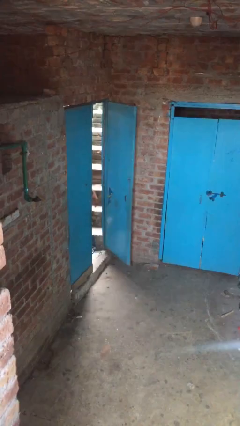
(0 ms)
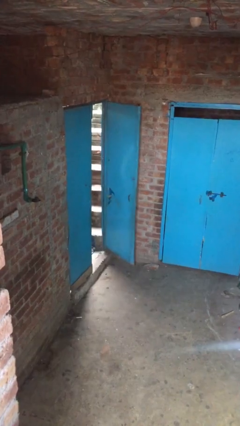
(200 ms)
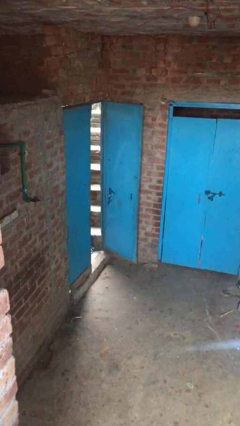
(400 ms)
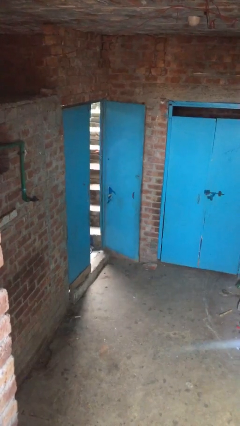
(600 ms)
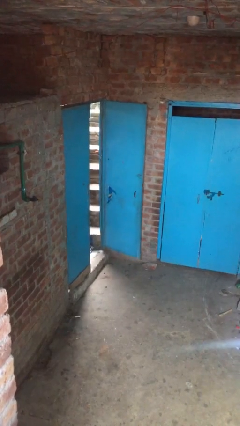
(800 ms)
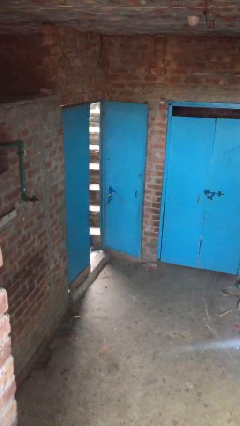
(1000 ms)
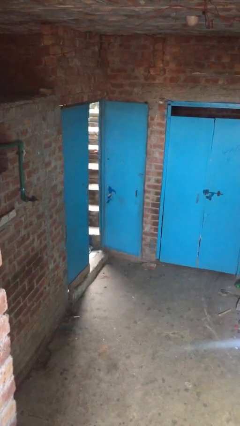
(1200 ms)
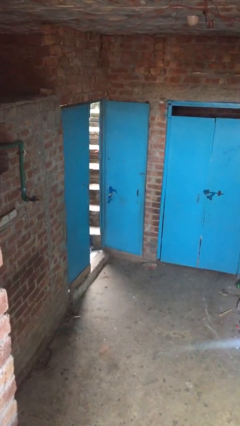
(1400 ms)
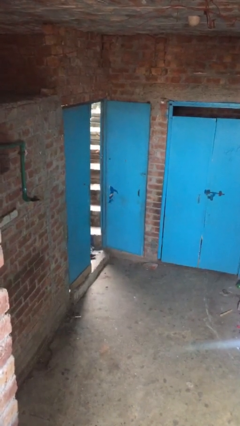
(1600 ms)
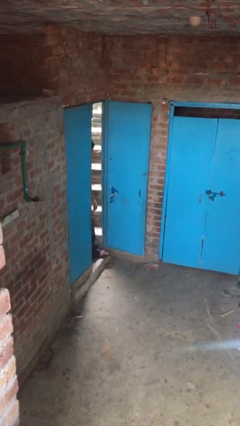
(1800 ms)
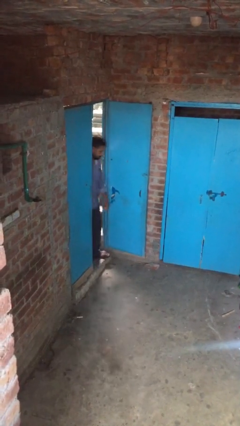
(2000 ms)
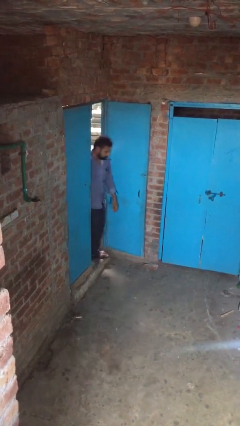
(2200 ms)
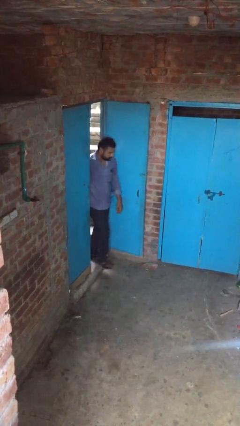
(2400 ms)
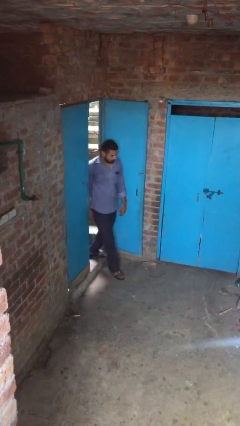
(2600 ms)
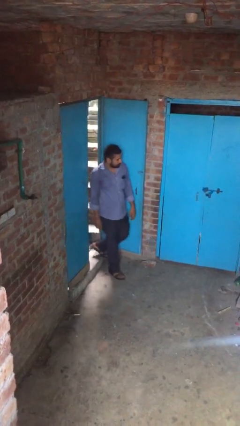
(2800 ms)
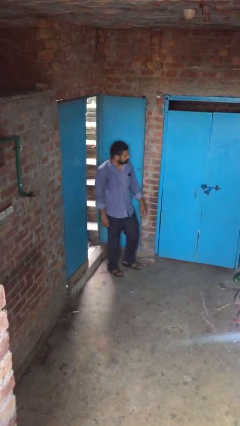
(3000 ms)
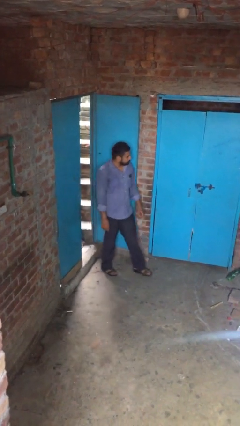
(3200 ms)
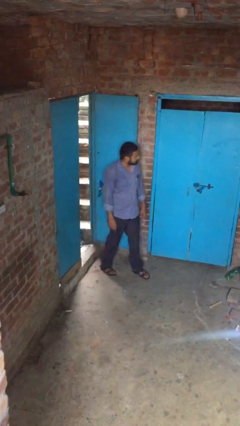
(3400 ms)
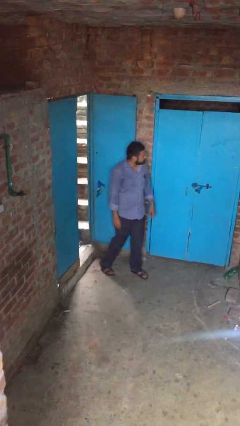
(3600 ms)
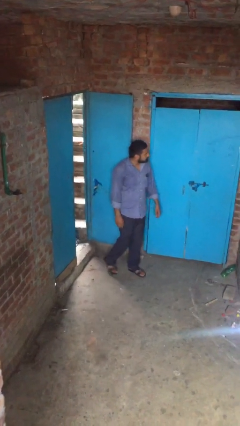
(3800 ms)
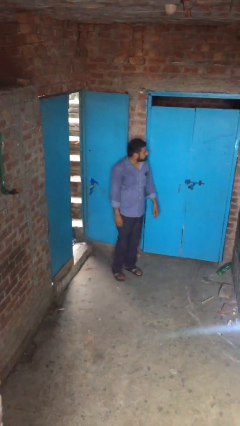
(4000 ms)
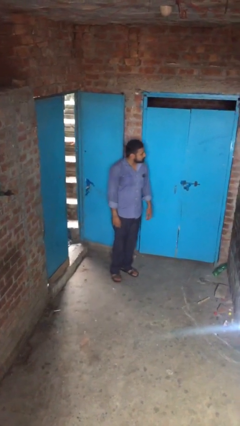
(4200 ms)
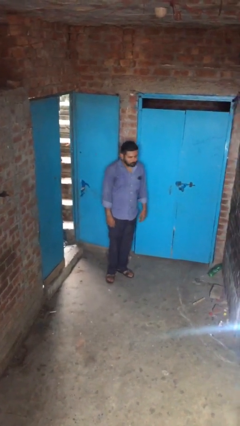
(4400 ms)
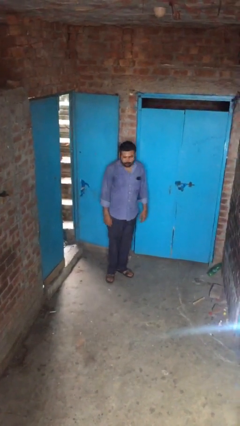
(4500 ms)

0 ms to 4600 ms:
person enters scene through structure

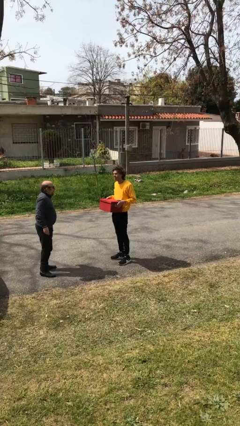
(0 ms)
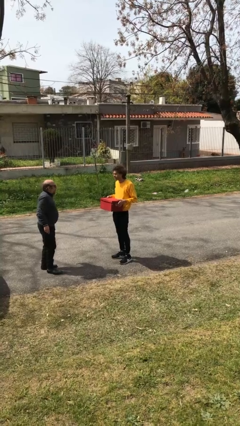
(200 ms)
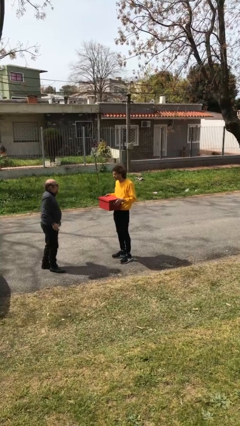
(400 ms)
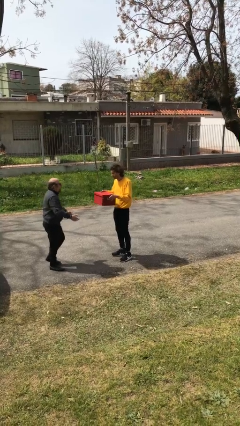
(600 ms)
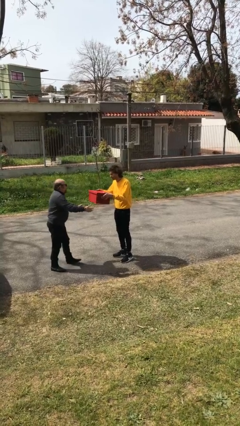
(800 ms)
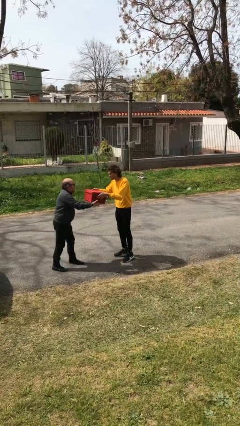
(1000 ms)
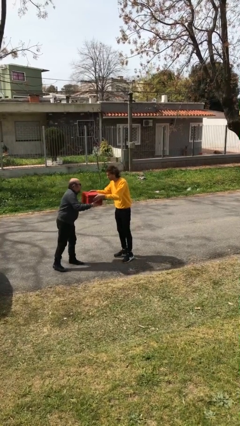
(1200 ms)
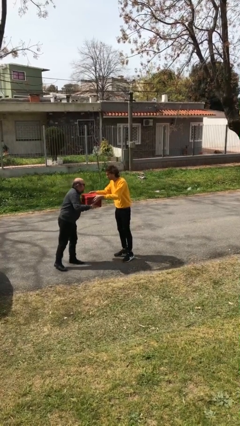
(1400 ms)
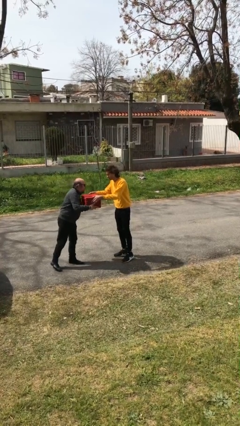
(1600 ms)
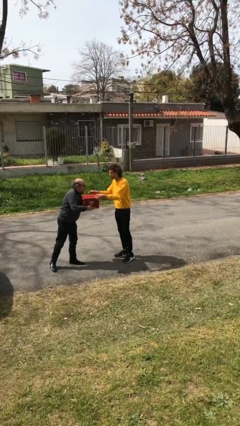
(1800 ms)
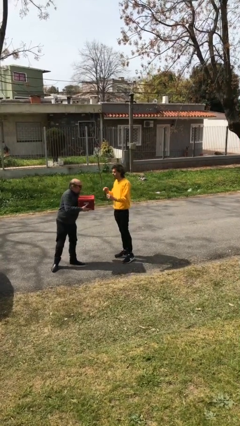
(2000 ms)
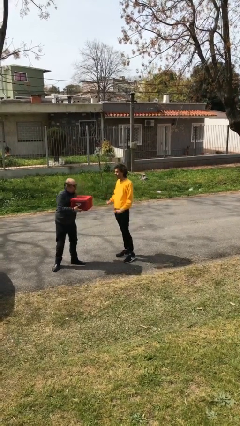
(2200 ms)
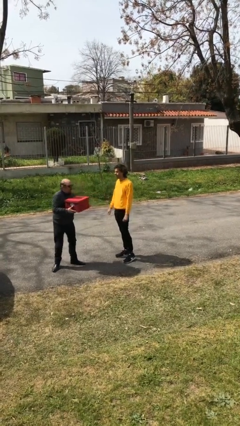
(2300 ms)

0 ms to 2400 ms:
person transfers object to person

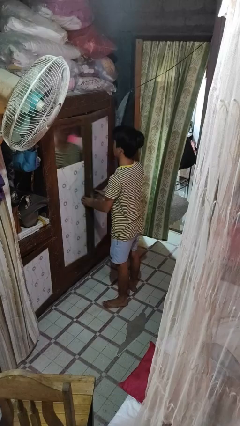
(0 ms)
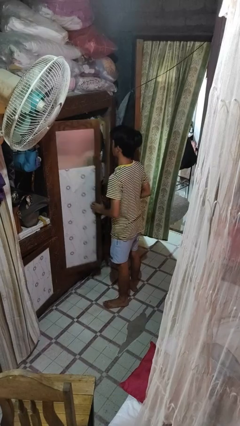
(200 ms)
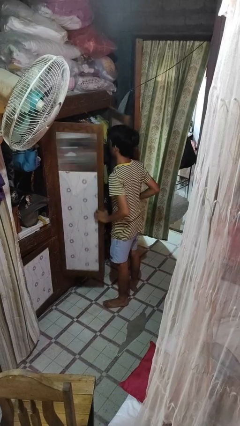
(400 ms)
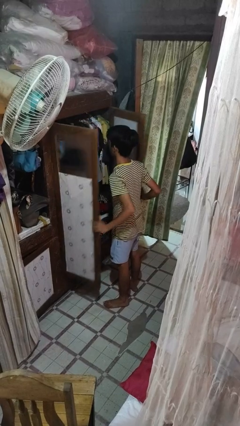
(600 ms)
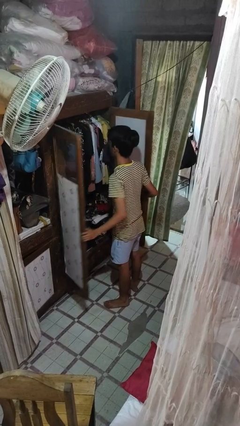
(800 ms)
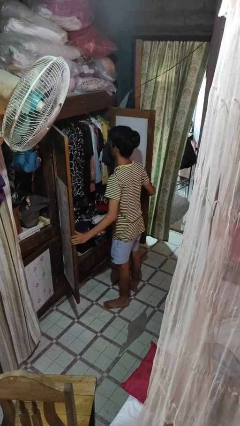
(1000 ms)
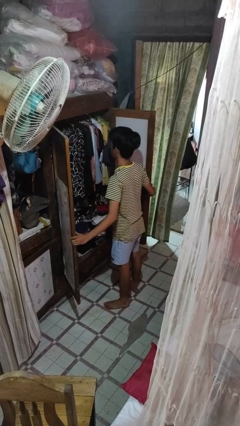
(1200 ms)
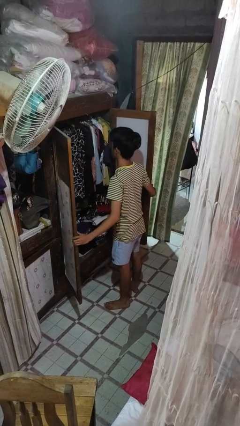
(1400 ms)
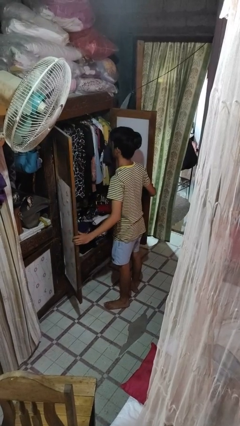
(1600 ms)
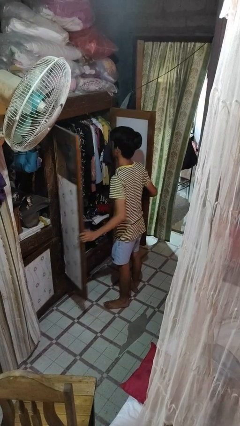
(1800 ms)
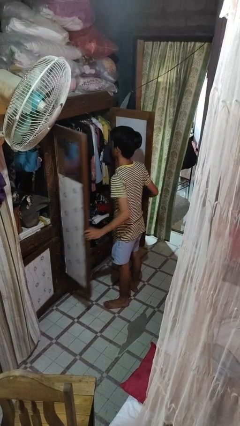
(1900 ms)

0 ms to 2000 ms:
person opens closet door

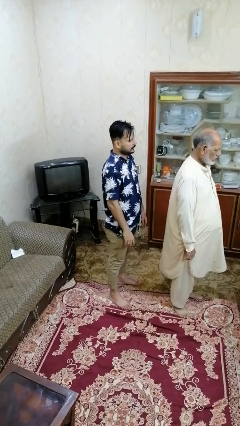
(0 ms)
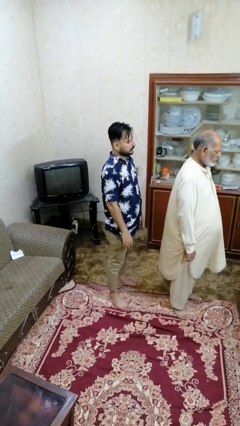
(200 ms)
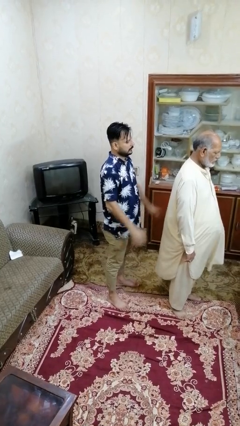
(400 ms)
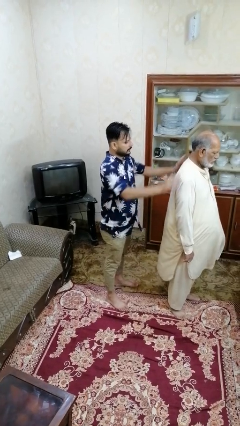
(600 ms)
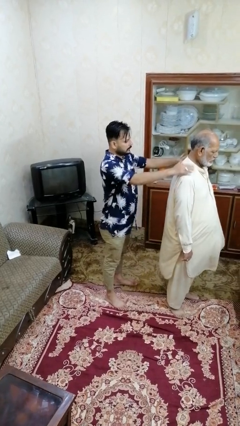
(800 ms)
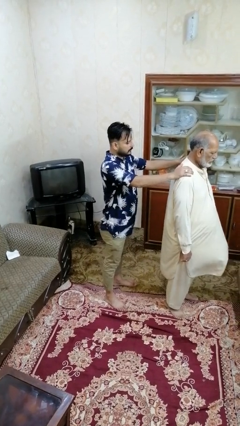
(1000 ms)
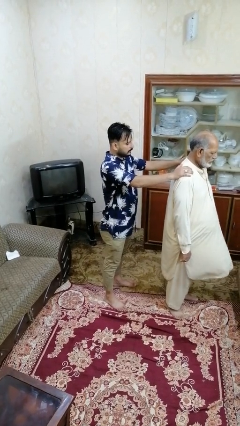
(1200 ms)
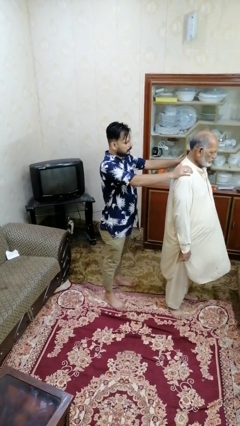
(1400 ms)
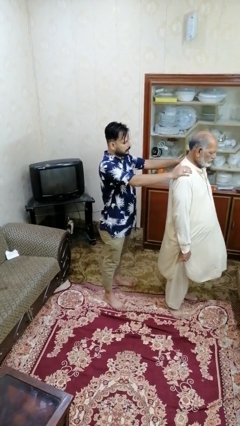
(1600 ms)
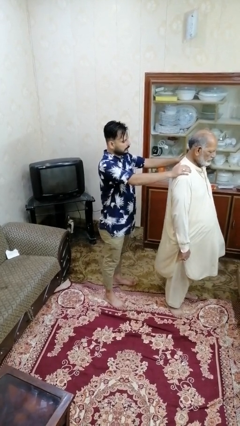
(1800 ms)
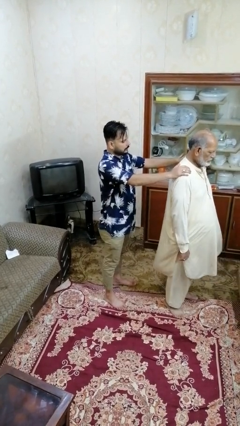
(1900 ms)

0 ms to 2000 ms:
person grabs person by shoulder

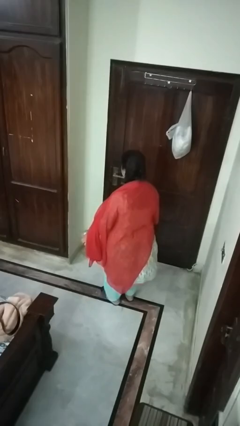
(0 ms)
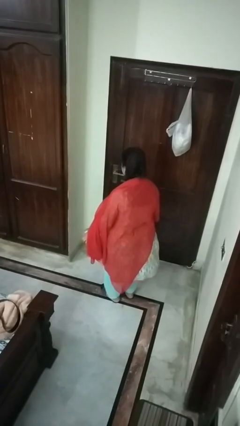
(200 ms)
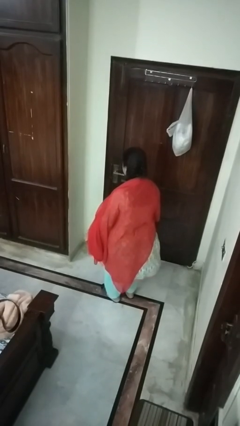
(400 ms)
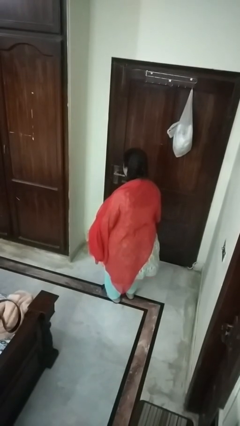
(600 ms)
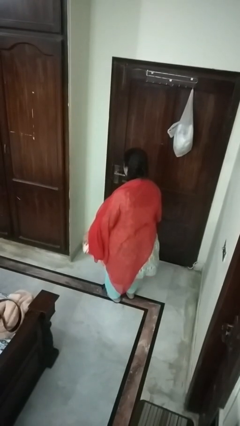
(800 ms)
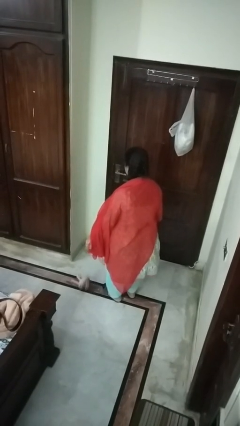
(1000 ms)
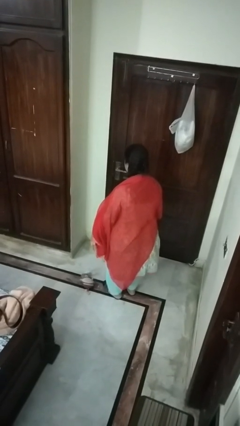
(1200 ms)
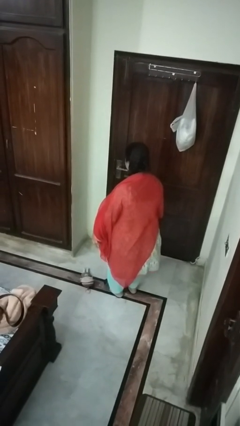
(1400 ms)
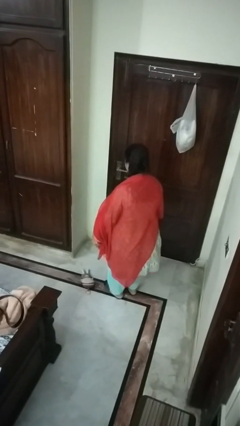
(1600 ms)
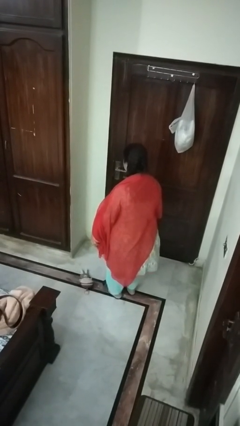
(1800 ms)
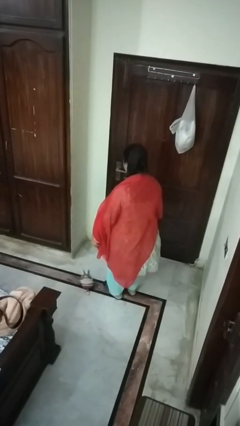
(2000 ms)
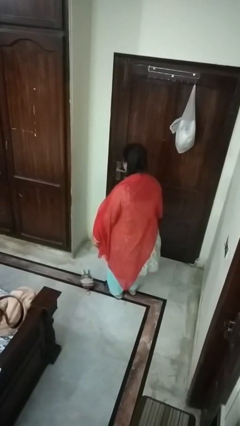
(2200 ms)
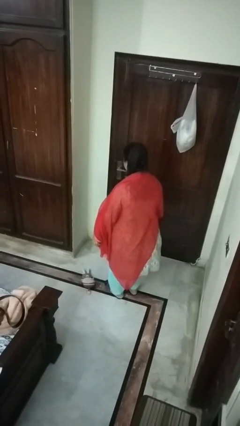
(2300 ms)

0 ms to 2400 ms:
person drops object

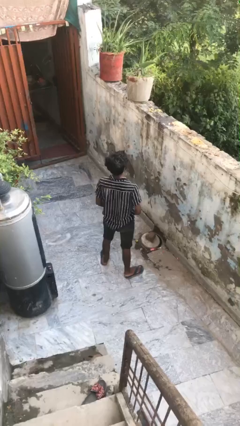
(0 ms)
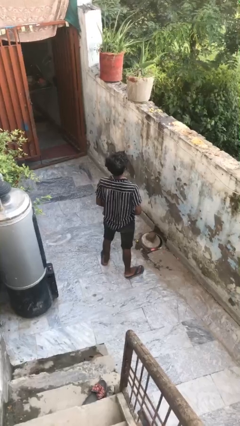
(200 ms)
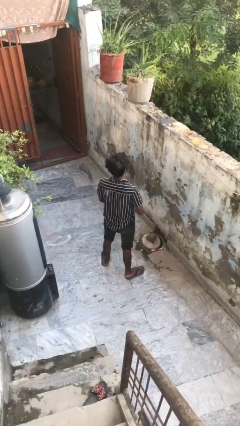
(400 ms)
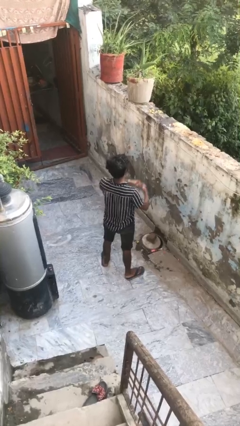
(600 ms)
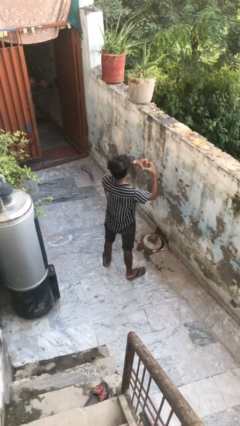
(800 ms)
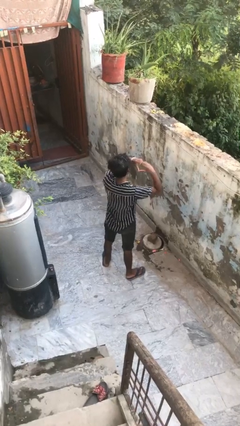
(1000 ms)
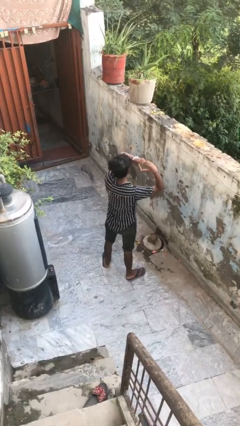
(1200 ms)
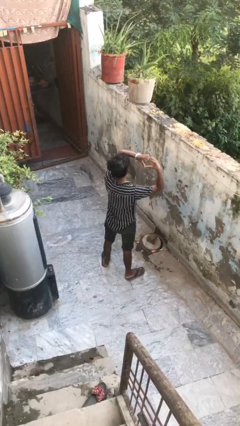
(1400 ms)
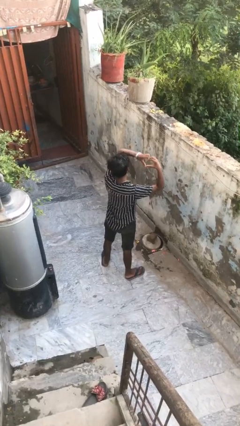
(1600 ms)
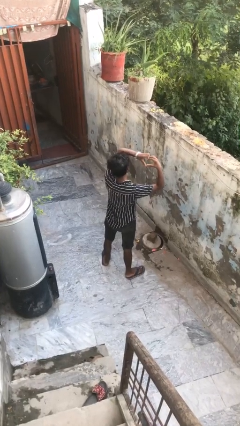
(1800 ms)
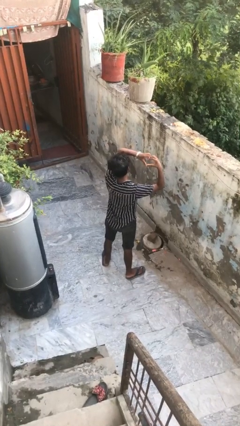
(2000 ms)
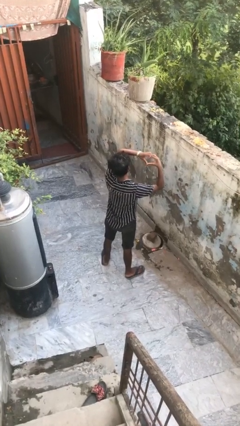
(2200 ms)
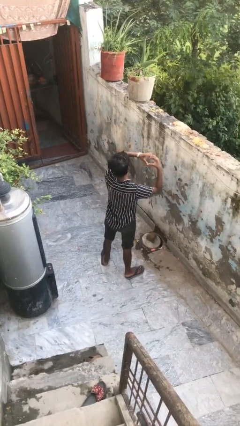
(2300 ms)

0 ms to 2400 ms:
person gestures heart

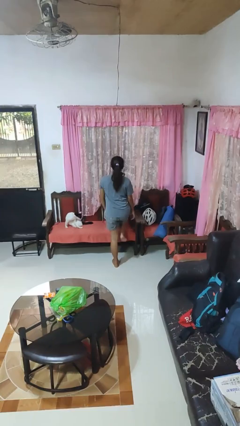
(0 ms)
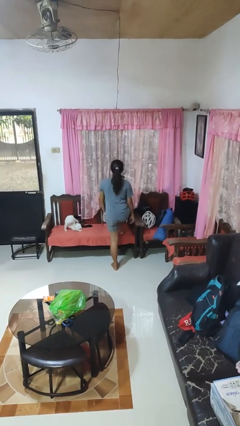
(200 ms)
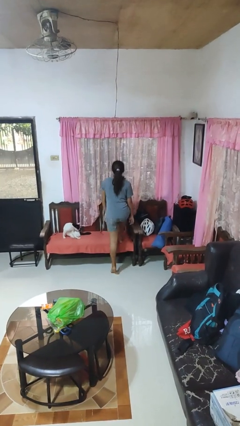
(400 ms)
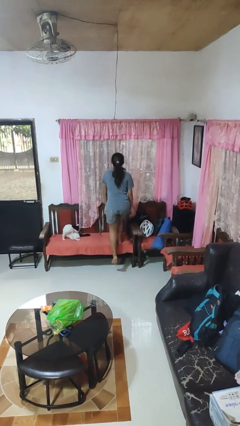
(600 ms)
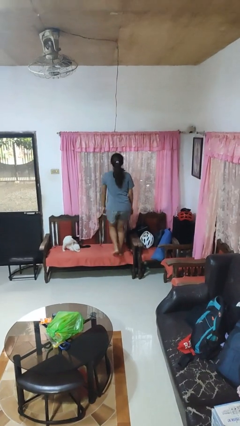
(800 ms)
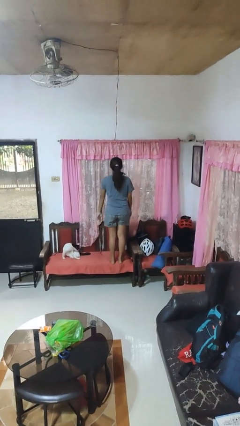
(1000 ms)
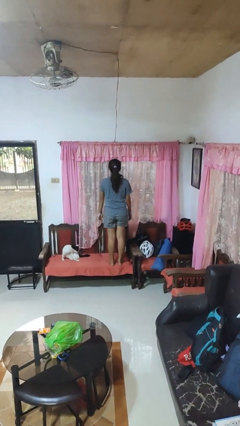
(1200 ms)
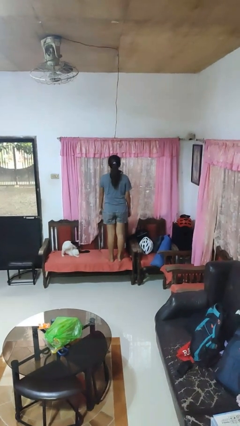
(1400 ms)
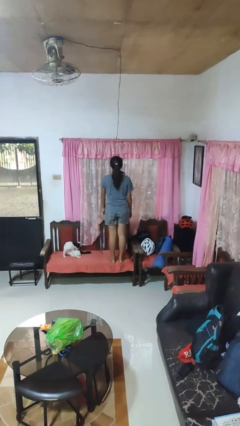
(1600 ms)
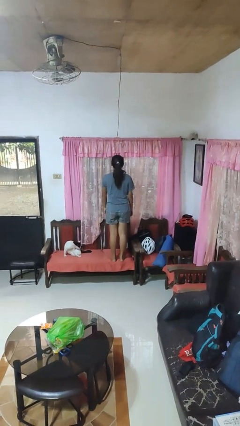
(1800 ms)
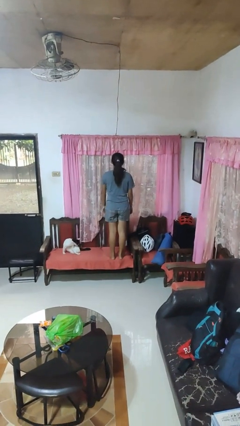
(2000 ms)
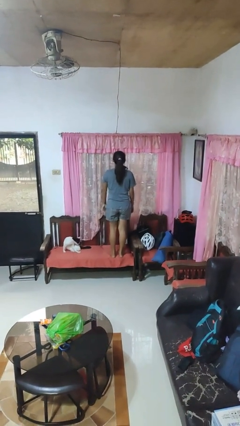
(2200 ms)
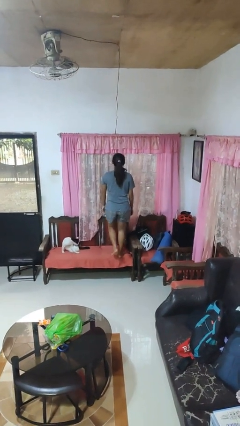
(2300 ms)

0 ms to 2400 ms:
person climbs on chair
